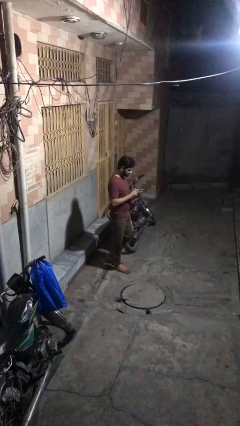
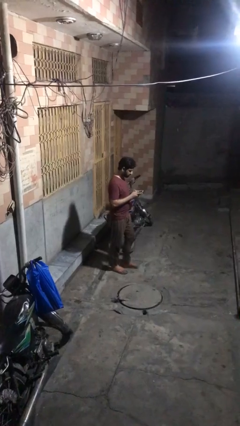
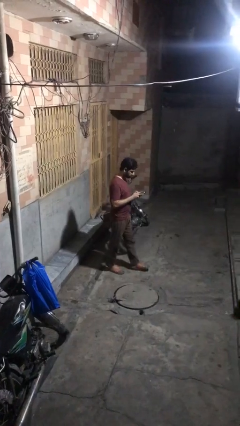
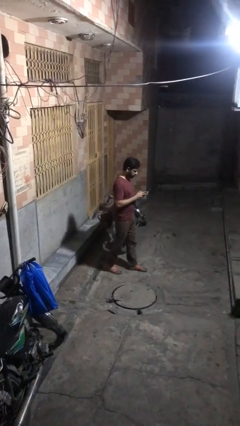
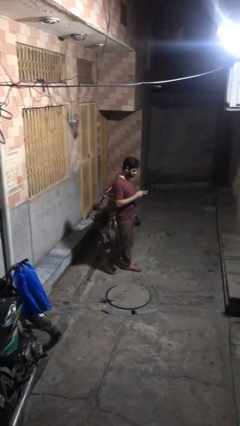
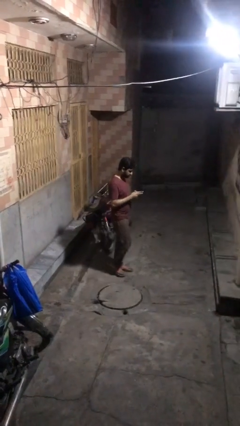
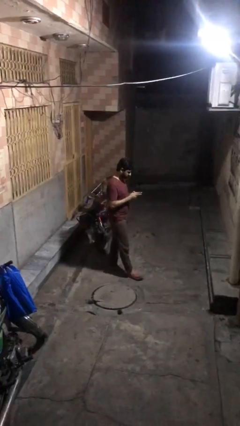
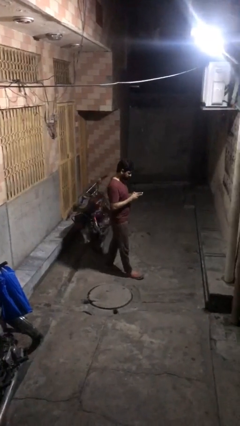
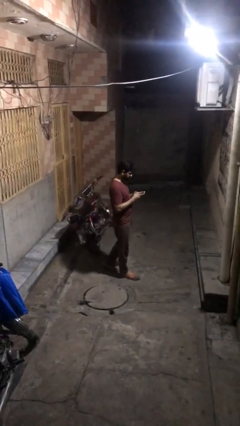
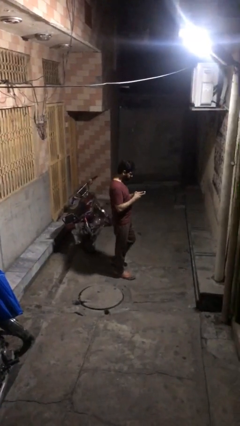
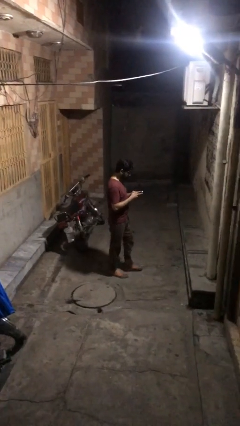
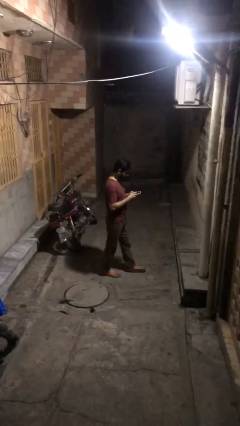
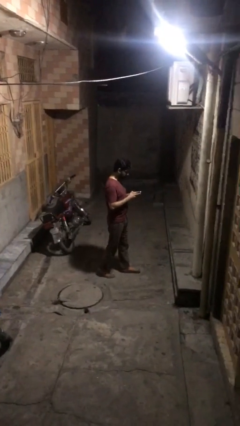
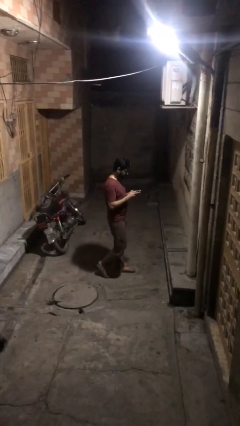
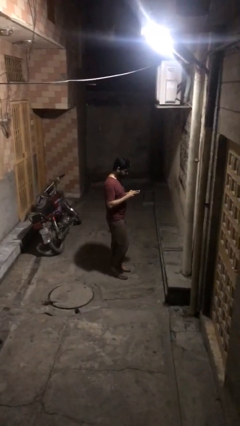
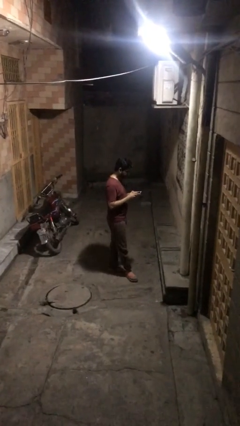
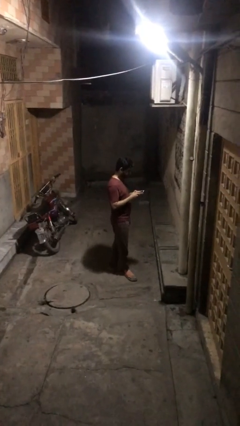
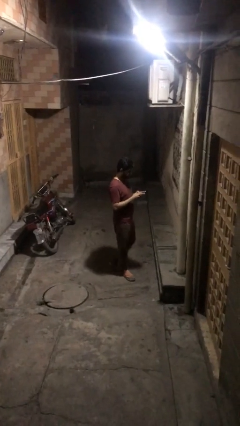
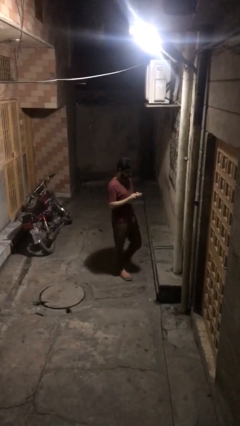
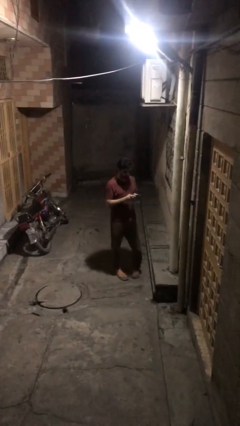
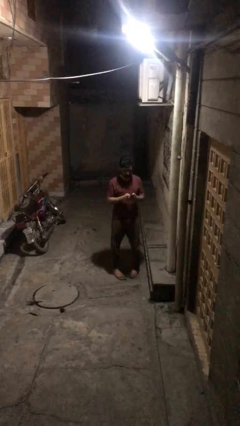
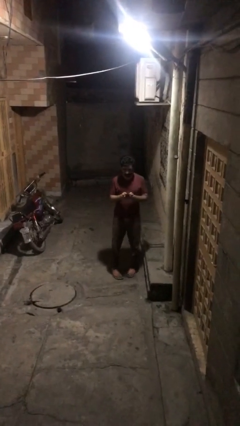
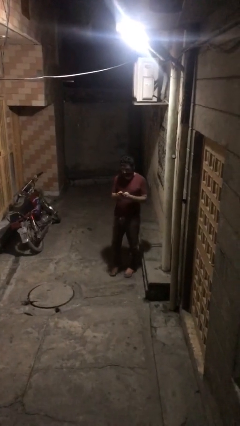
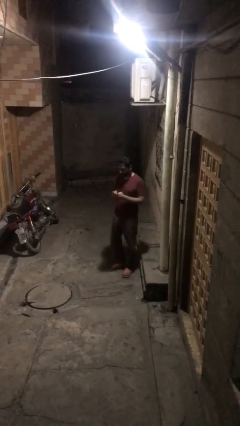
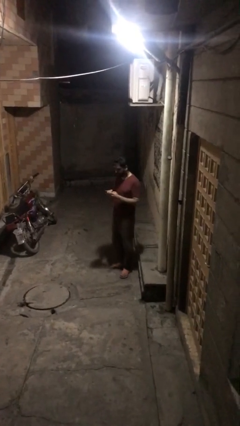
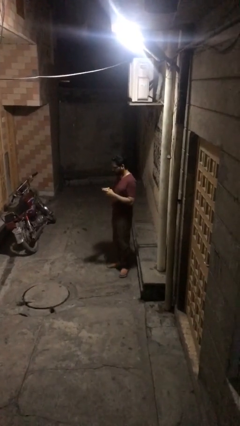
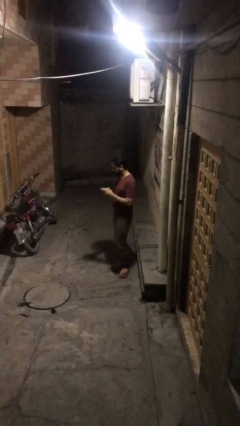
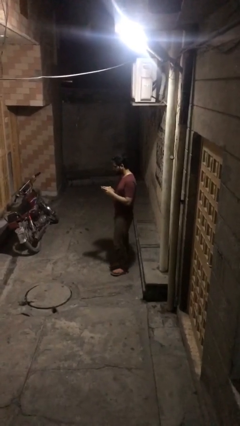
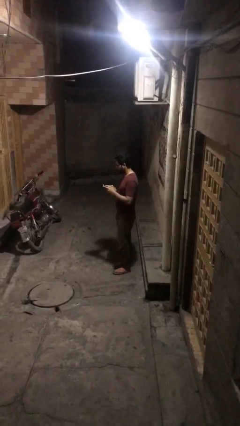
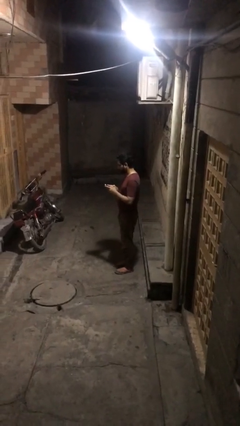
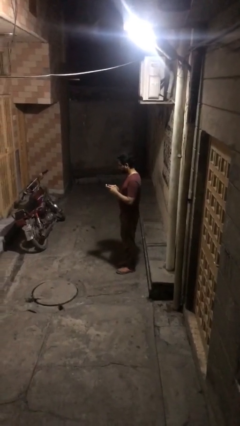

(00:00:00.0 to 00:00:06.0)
person texts on phone

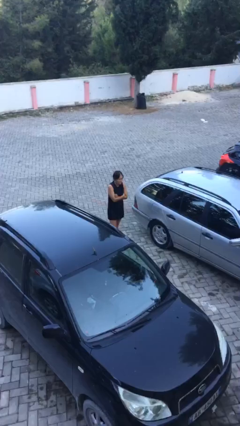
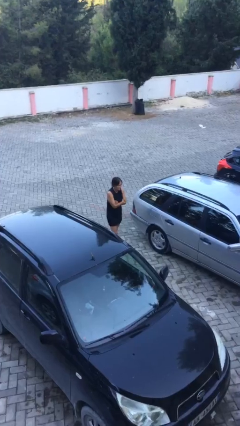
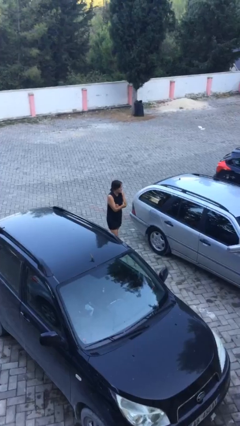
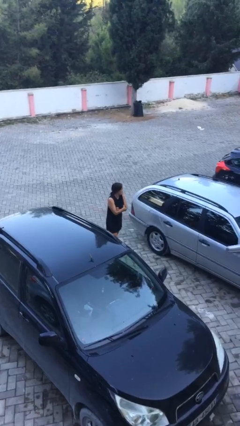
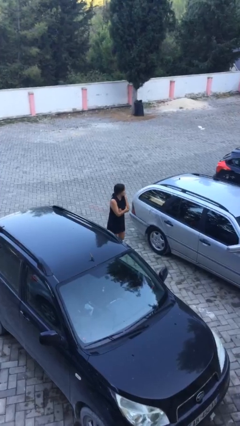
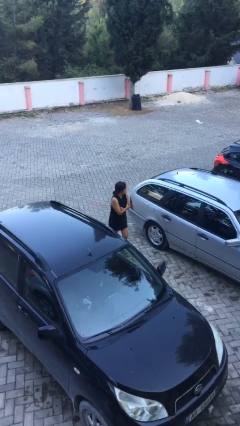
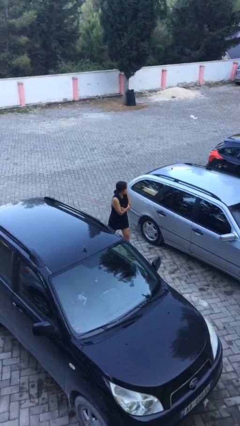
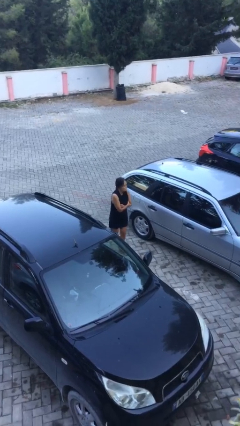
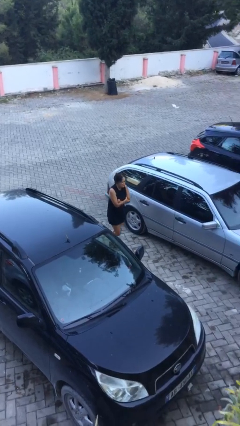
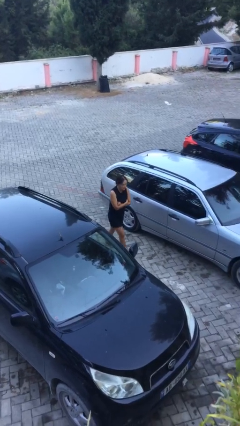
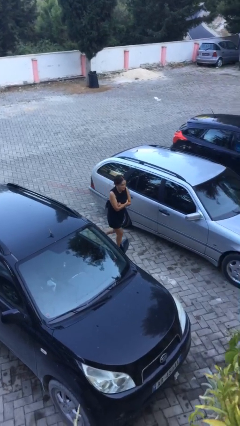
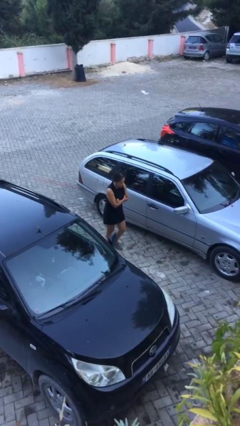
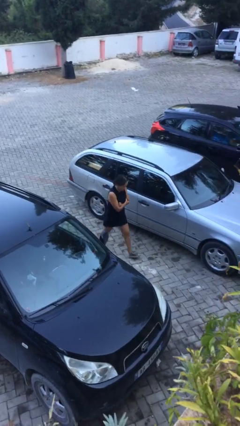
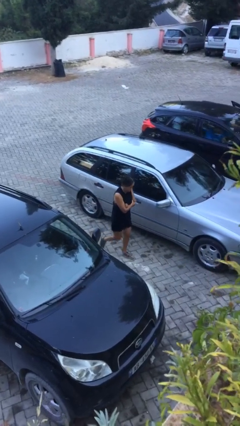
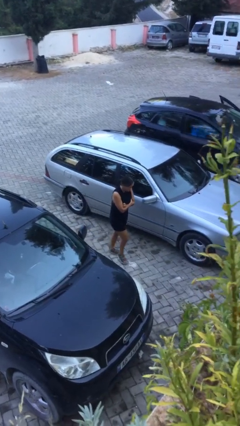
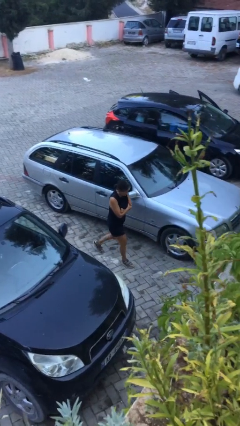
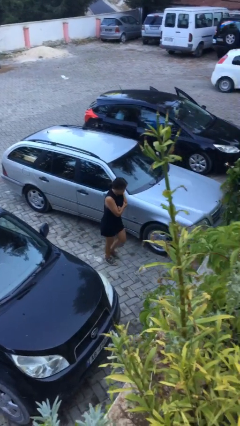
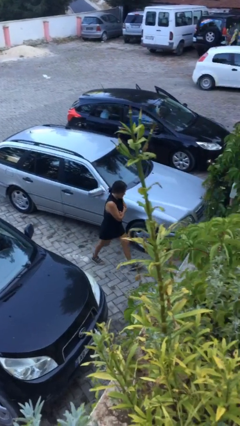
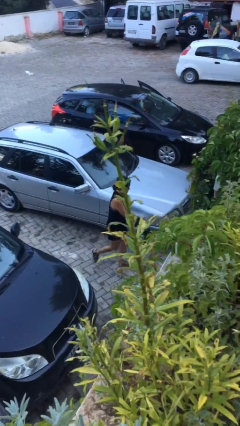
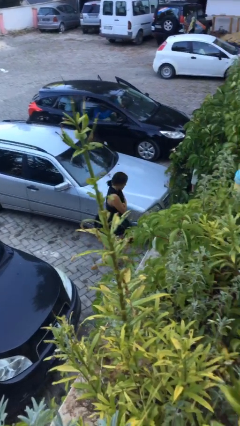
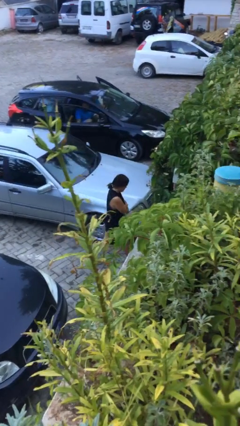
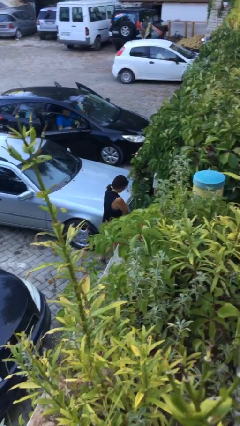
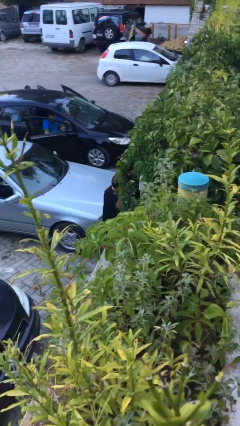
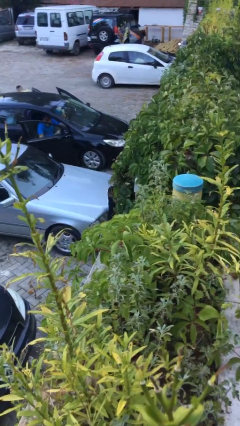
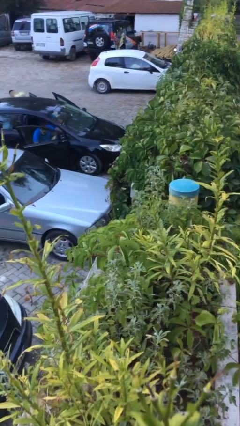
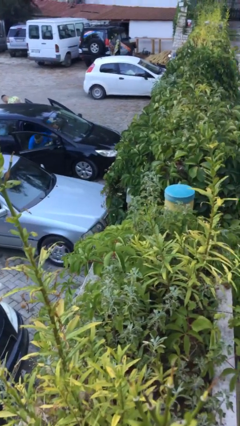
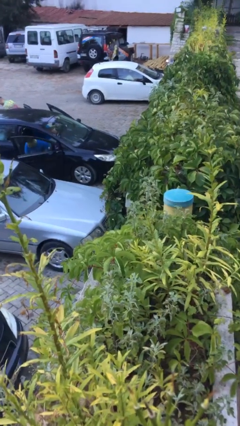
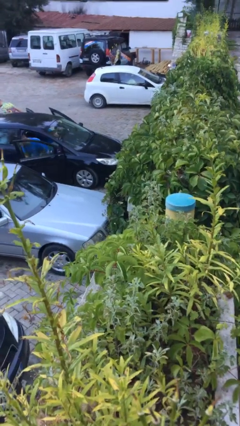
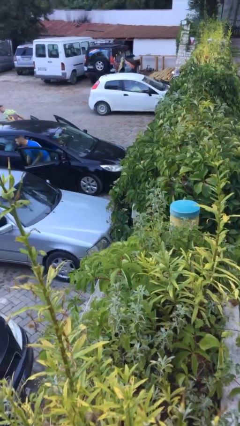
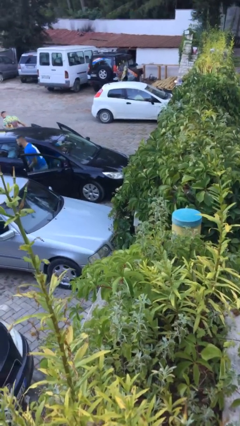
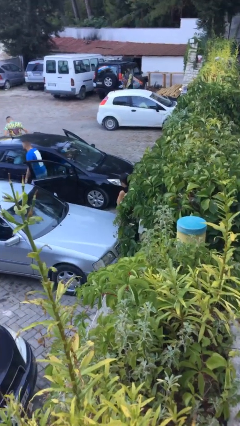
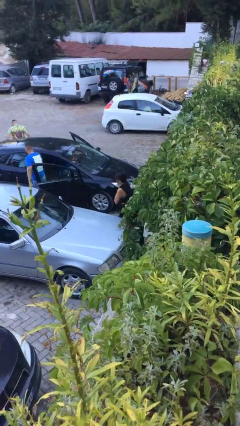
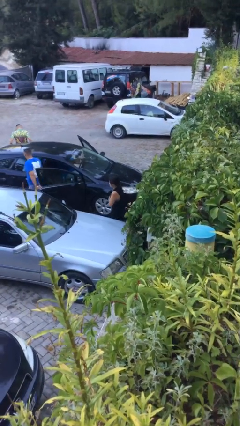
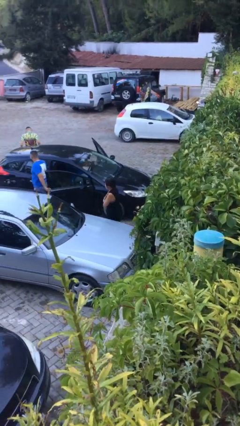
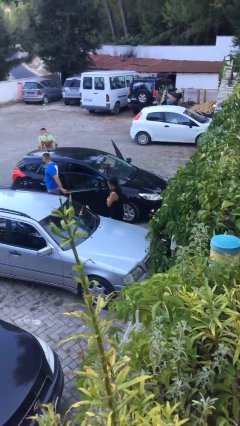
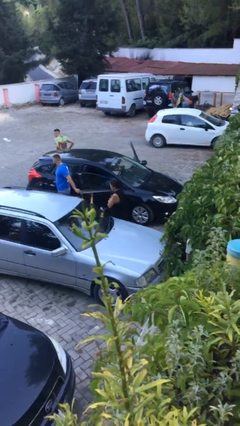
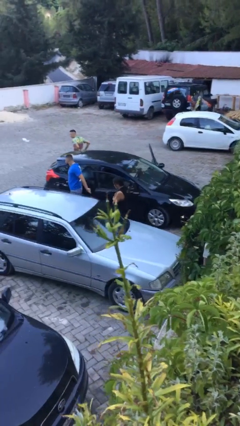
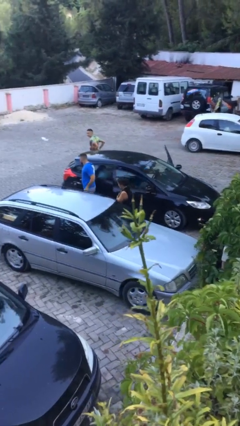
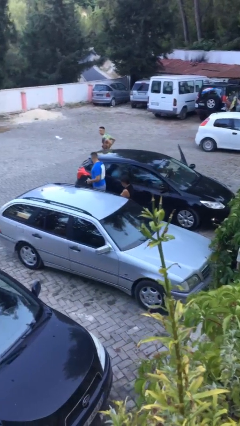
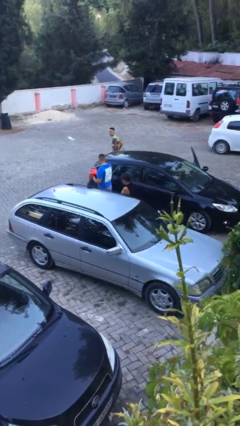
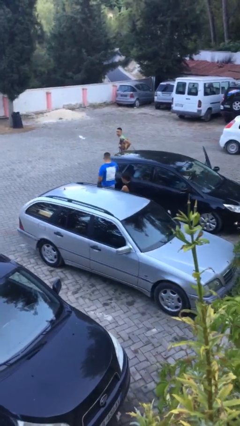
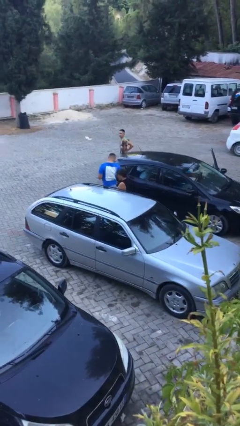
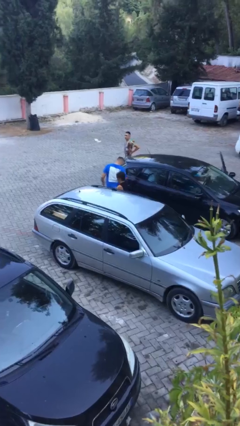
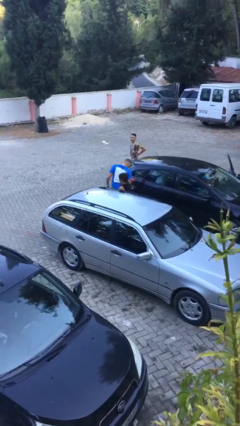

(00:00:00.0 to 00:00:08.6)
person walks around car

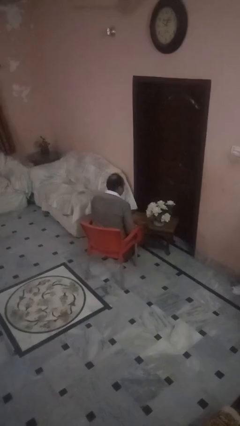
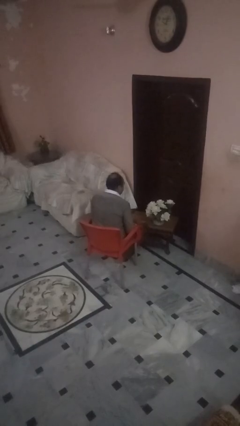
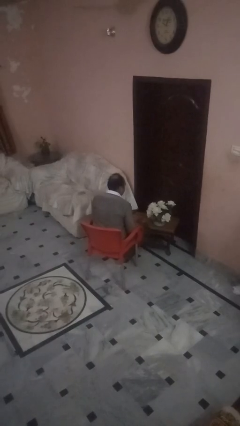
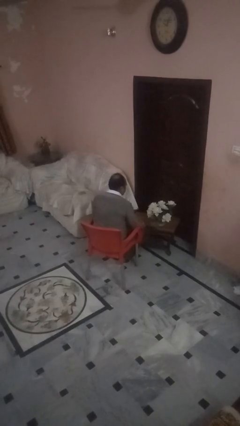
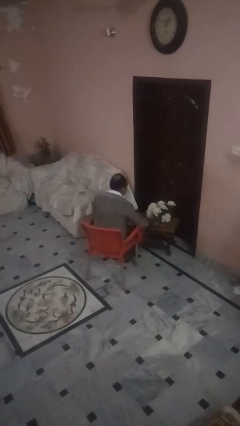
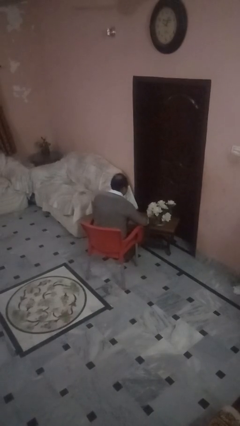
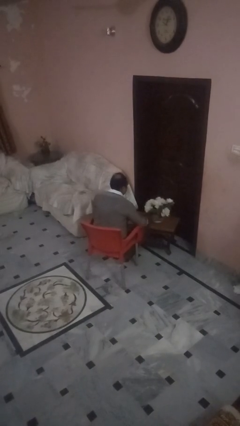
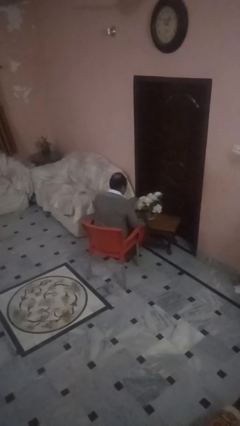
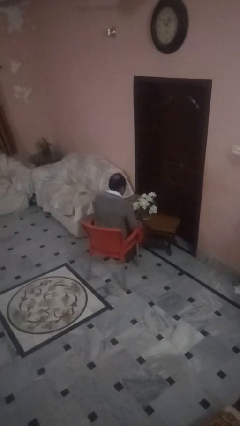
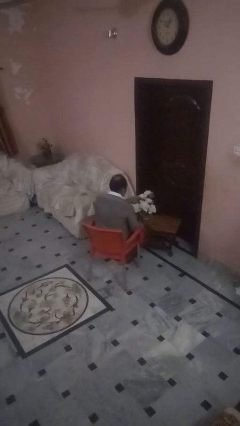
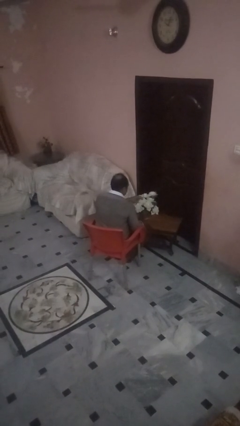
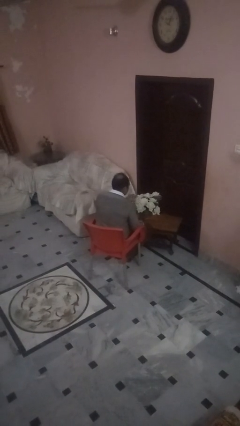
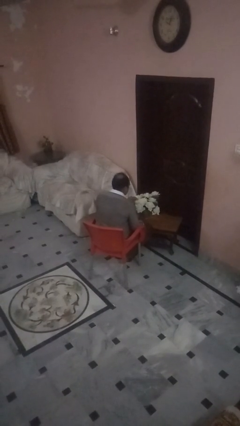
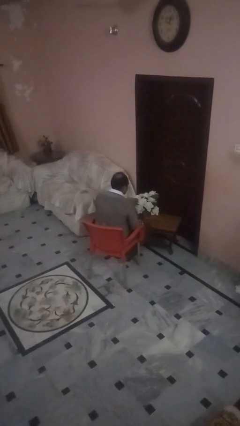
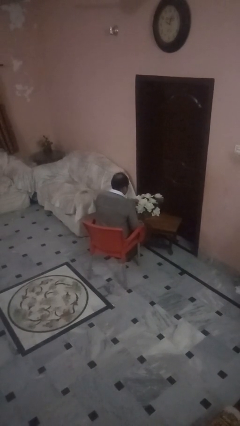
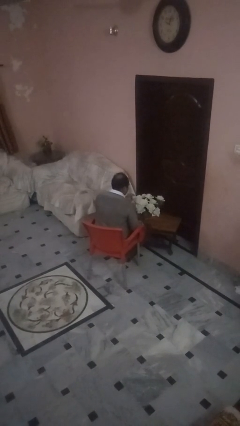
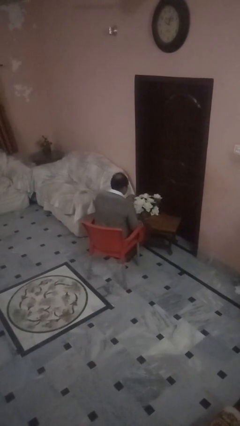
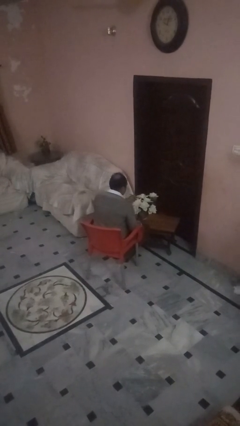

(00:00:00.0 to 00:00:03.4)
person arranges flowers in vase

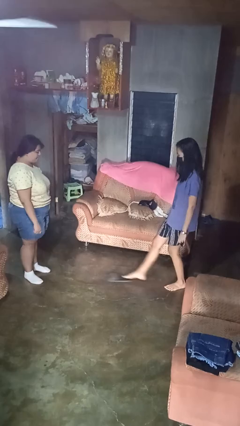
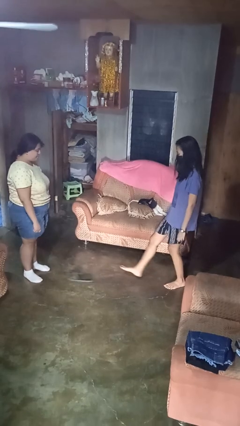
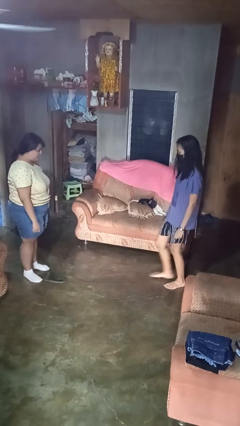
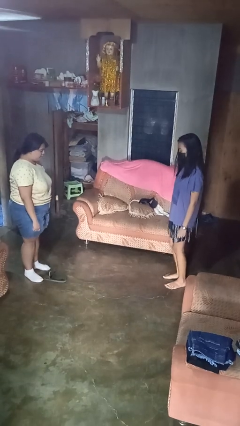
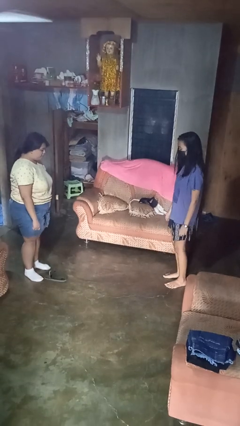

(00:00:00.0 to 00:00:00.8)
person kicks object to person
